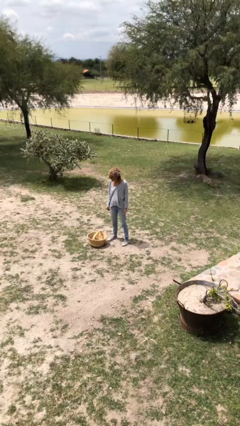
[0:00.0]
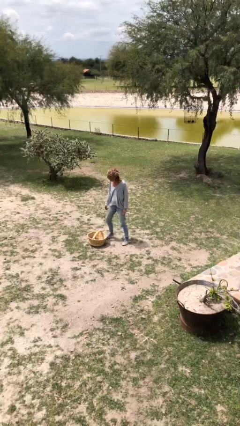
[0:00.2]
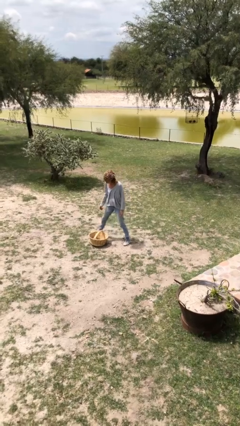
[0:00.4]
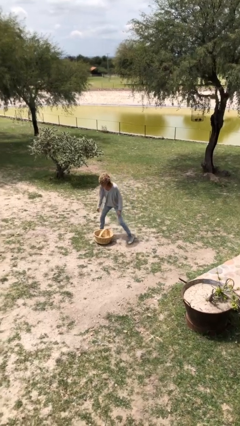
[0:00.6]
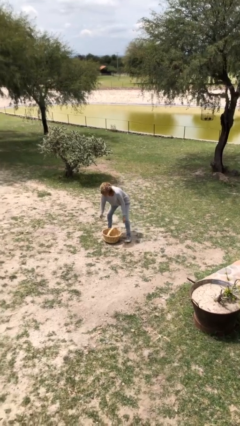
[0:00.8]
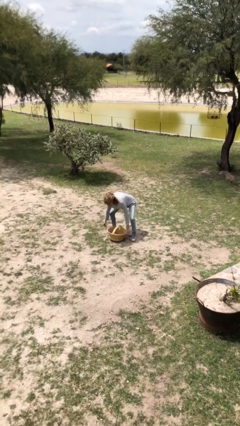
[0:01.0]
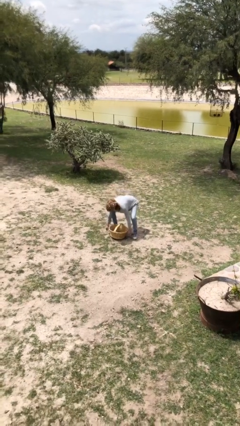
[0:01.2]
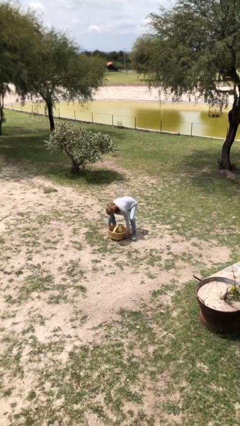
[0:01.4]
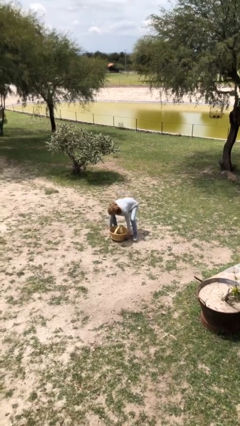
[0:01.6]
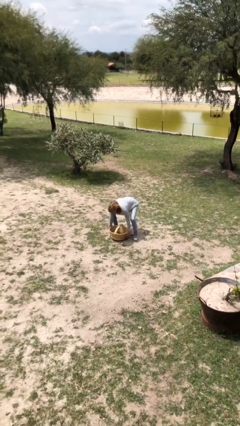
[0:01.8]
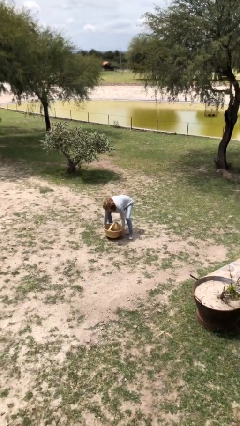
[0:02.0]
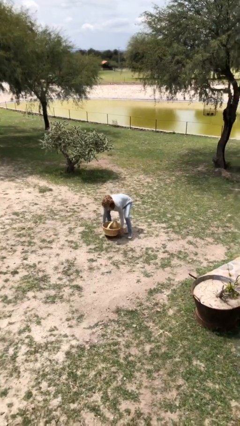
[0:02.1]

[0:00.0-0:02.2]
person picks up object from floor

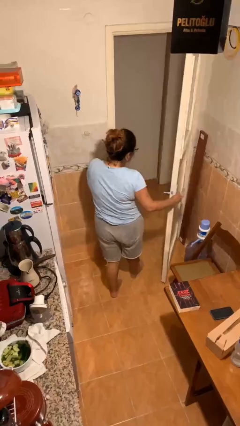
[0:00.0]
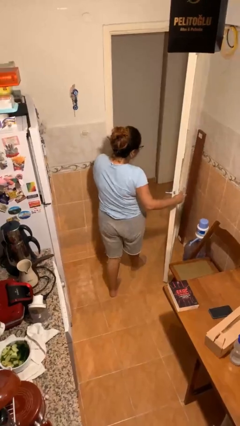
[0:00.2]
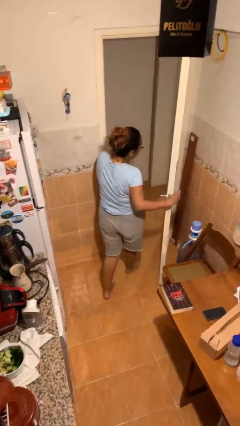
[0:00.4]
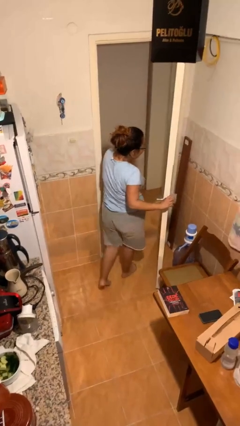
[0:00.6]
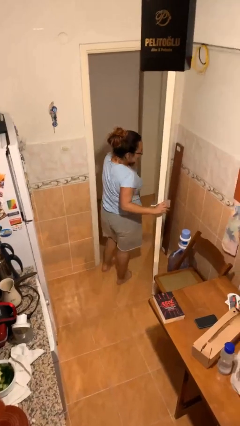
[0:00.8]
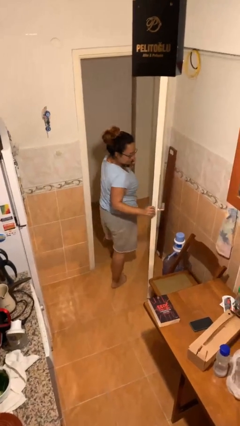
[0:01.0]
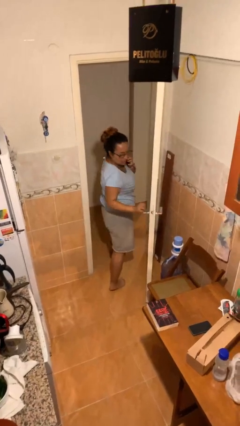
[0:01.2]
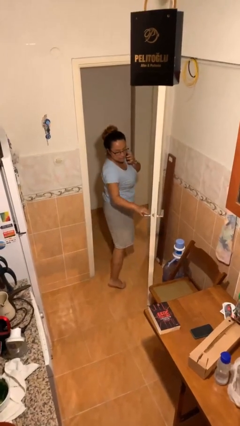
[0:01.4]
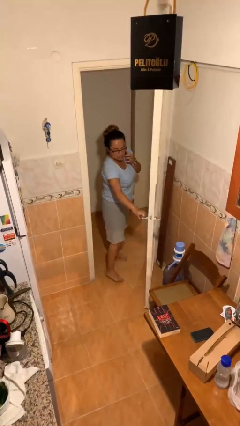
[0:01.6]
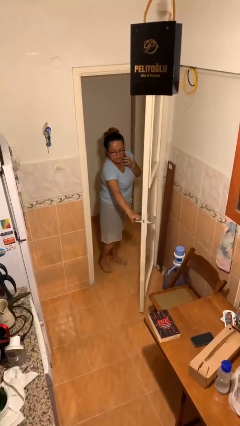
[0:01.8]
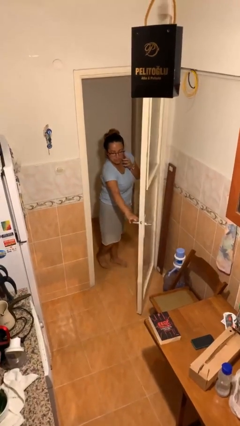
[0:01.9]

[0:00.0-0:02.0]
person exits scene through structure

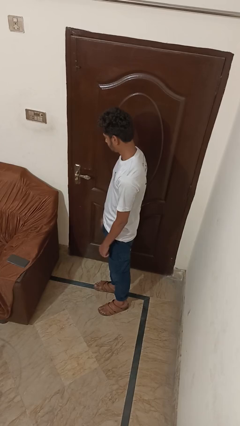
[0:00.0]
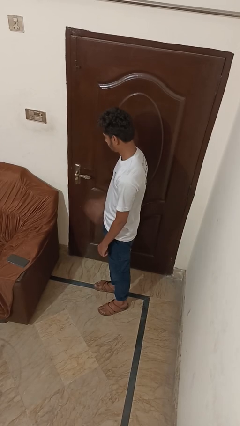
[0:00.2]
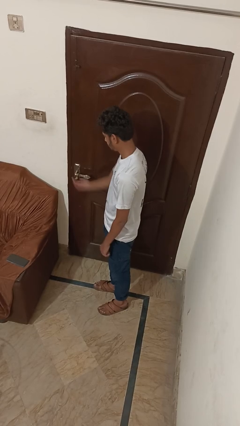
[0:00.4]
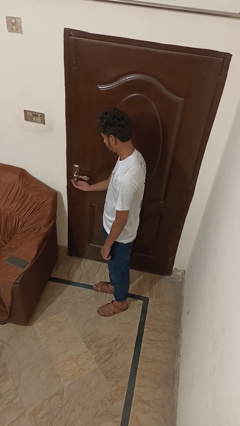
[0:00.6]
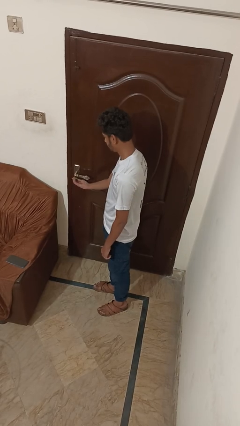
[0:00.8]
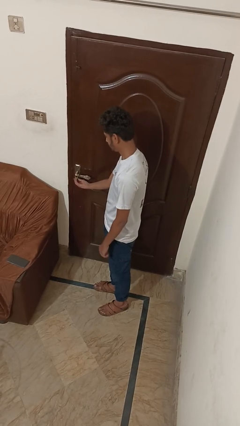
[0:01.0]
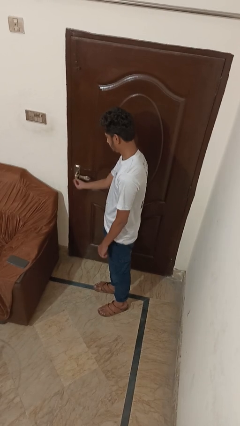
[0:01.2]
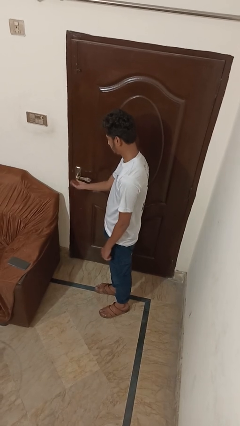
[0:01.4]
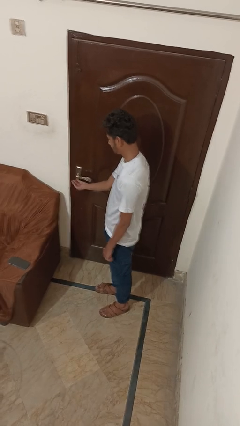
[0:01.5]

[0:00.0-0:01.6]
person locks door with keys

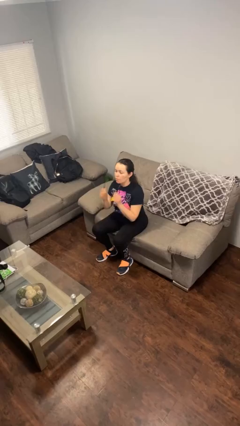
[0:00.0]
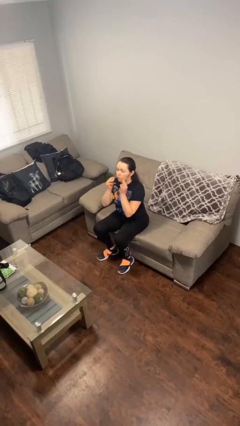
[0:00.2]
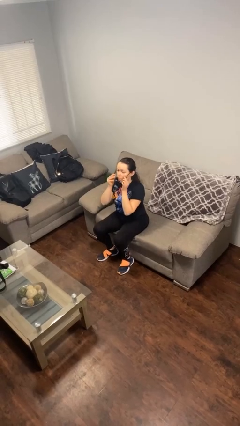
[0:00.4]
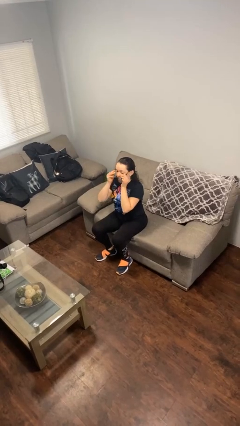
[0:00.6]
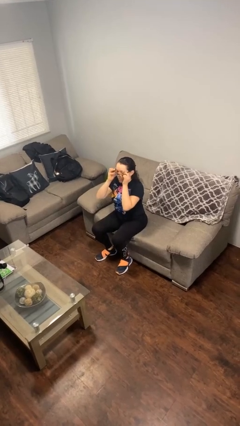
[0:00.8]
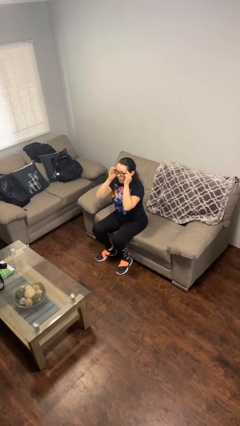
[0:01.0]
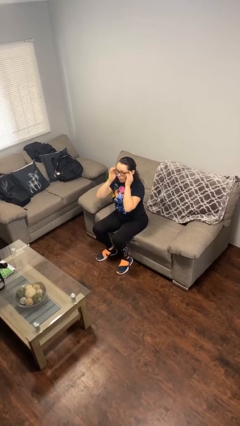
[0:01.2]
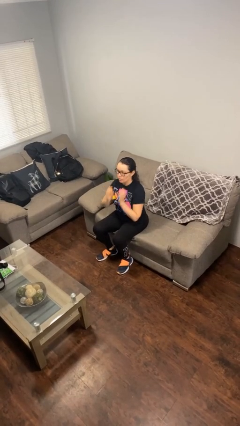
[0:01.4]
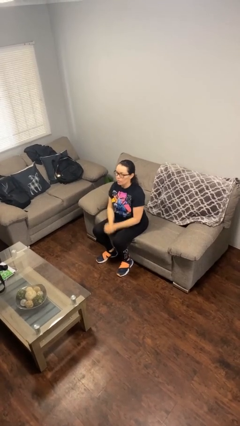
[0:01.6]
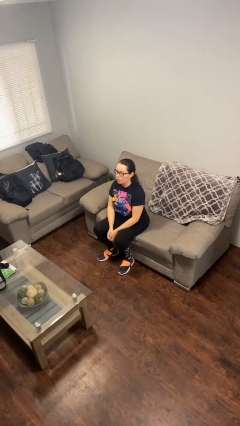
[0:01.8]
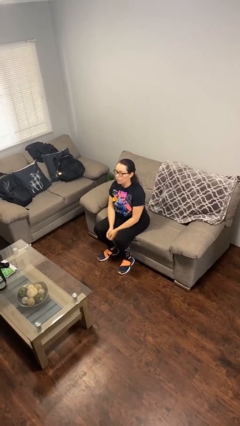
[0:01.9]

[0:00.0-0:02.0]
person puts on glasses

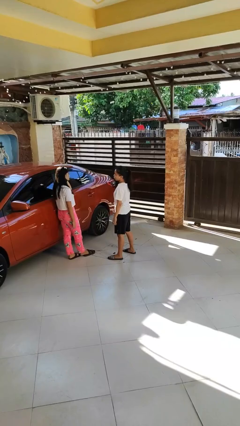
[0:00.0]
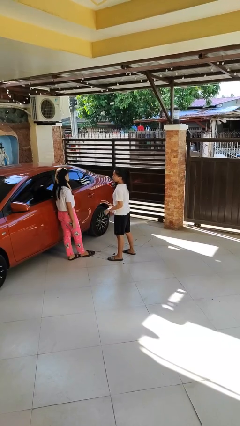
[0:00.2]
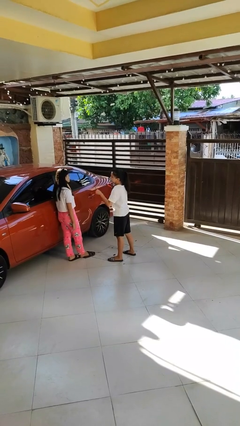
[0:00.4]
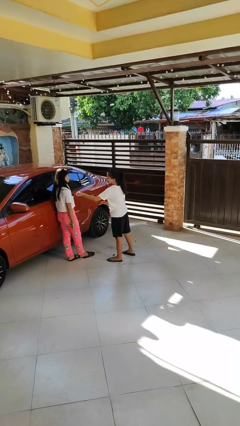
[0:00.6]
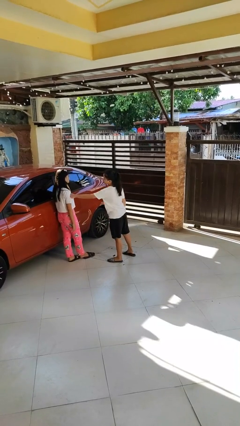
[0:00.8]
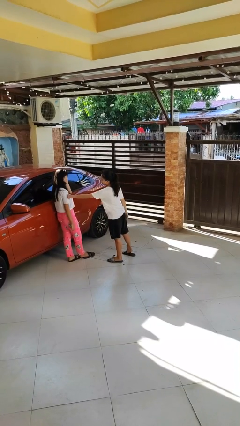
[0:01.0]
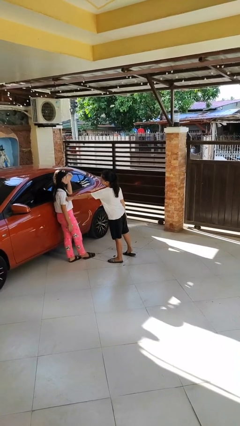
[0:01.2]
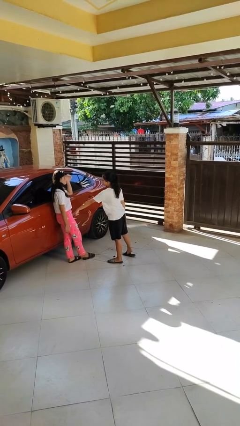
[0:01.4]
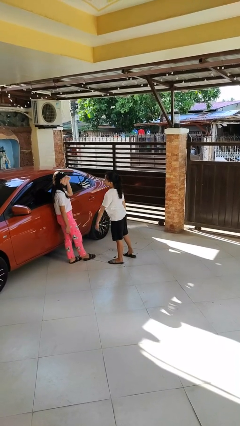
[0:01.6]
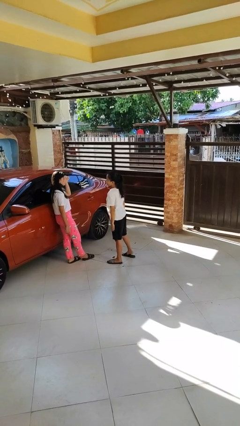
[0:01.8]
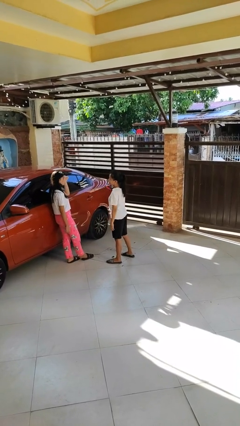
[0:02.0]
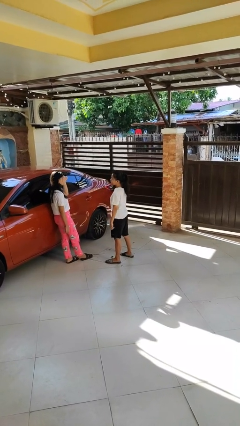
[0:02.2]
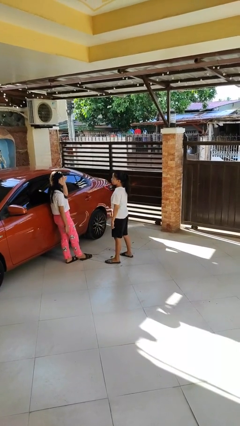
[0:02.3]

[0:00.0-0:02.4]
person pounds shoulders of person

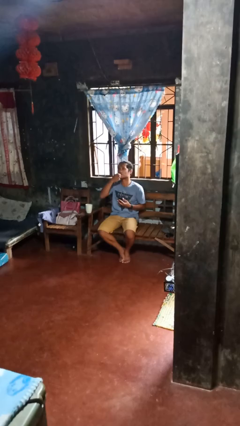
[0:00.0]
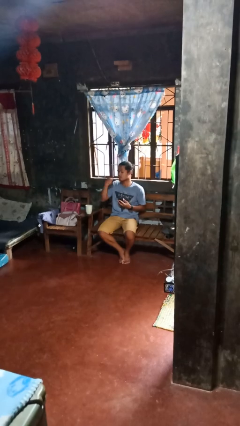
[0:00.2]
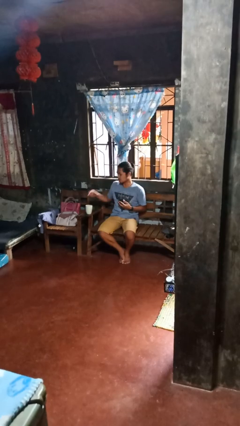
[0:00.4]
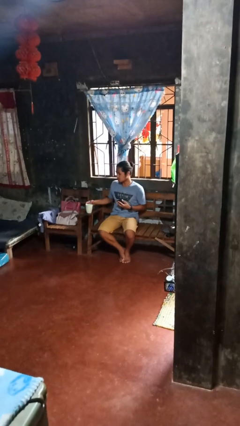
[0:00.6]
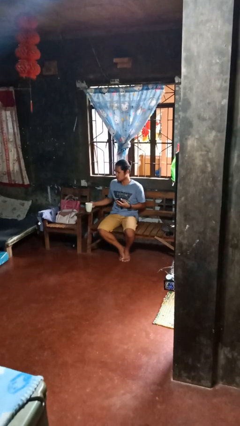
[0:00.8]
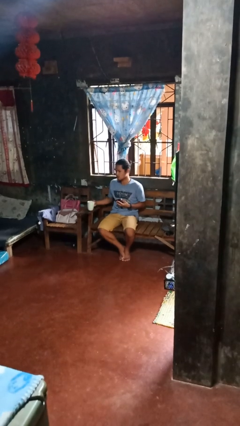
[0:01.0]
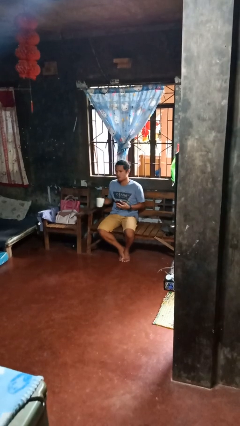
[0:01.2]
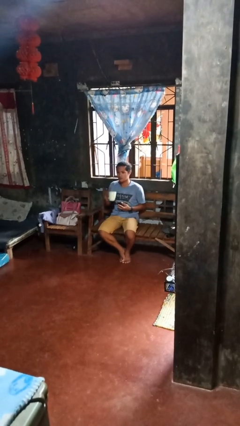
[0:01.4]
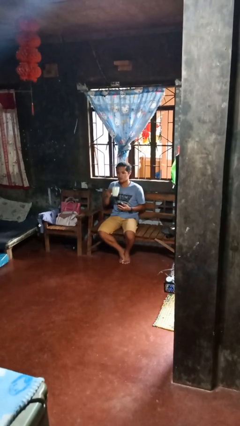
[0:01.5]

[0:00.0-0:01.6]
person takes medicine pills

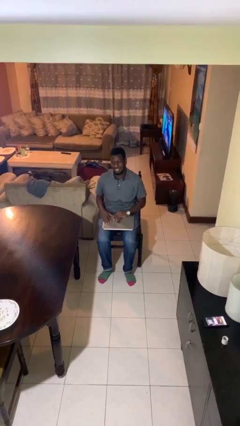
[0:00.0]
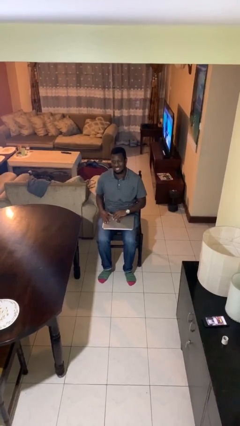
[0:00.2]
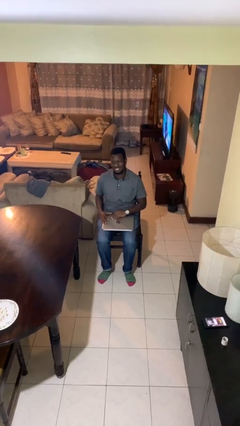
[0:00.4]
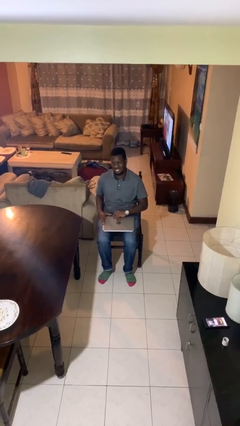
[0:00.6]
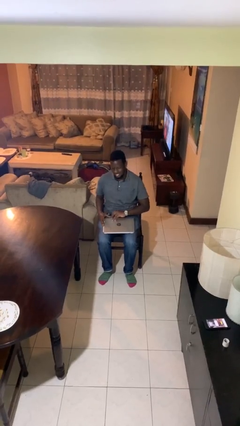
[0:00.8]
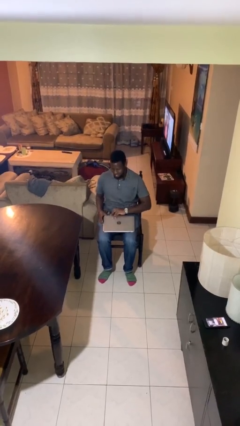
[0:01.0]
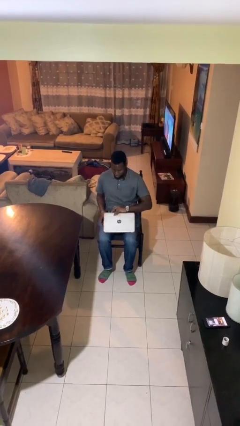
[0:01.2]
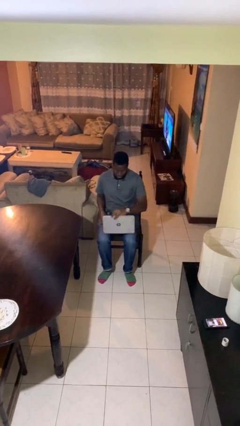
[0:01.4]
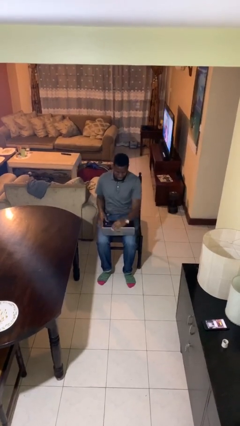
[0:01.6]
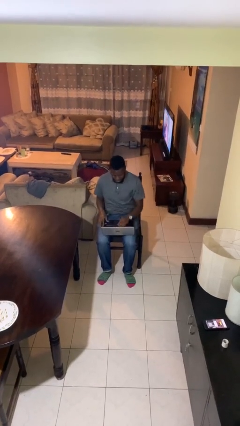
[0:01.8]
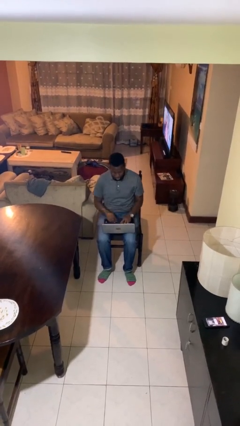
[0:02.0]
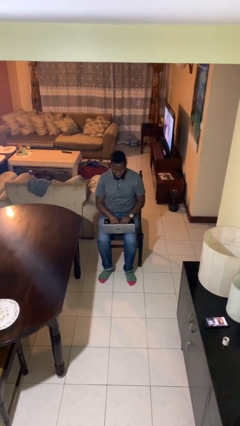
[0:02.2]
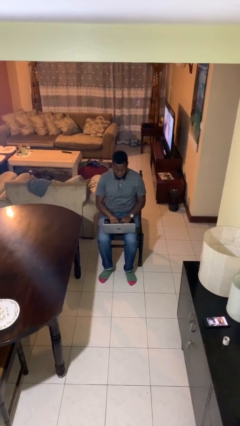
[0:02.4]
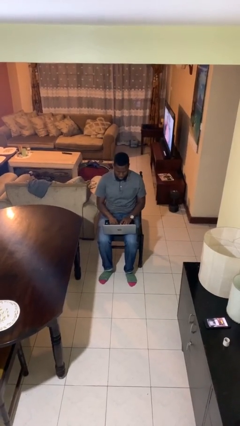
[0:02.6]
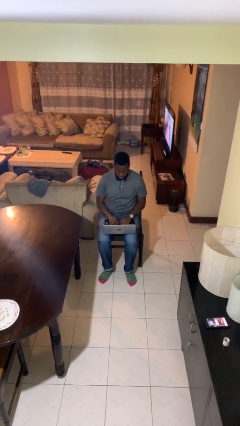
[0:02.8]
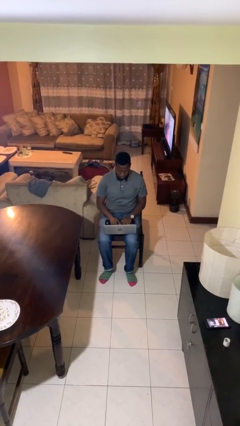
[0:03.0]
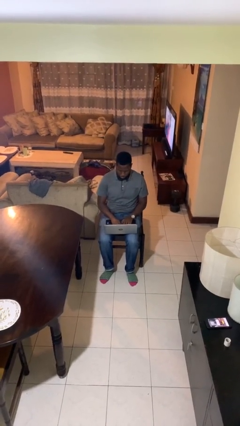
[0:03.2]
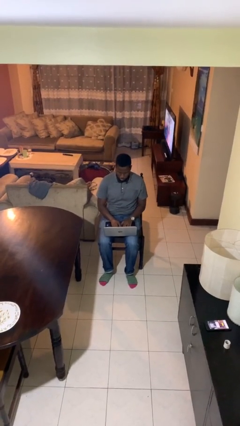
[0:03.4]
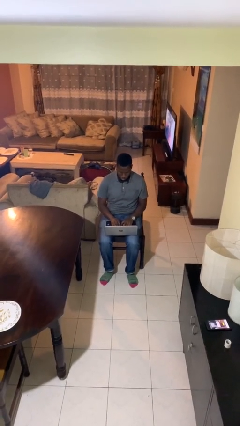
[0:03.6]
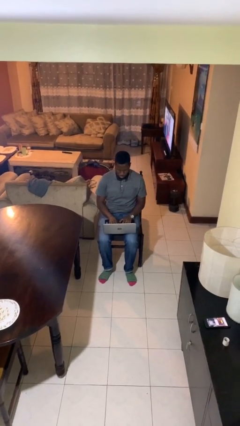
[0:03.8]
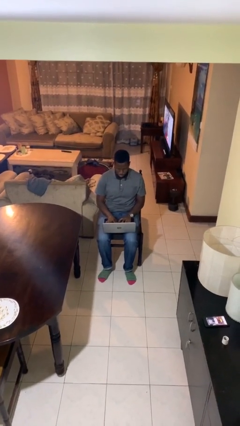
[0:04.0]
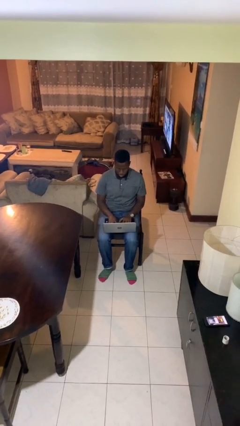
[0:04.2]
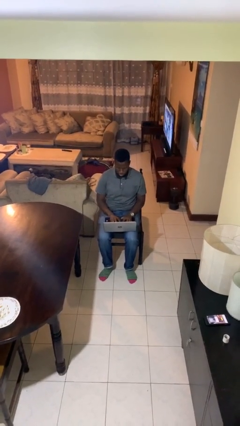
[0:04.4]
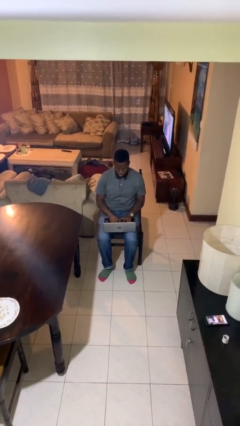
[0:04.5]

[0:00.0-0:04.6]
person interacts with laptop

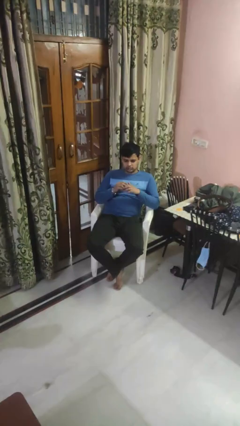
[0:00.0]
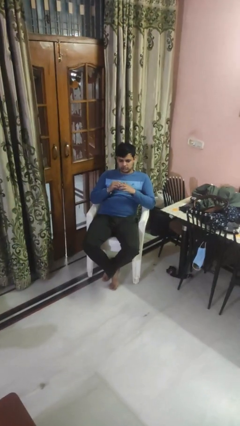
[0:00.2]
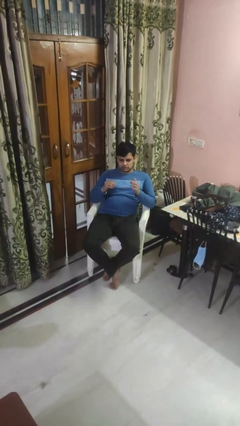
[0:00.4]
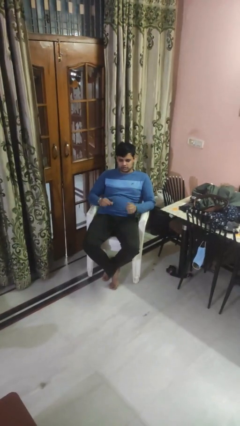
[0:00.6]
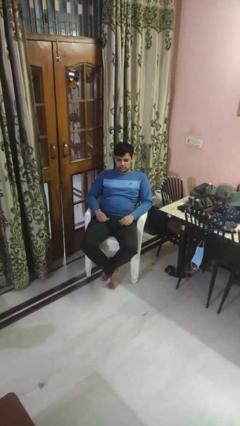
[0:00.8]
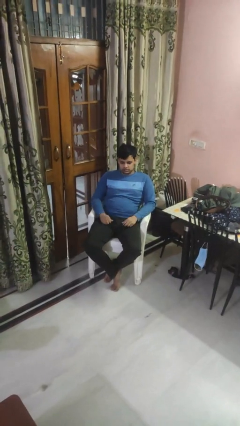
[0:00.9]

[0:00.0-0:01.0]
person takes off ring
